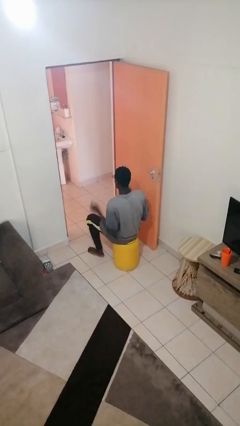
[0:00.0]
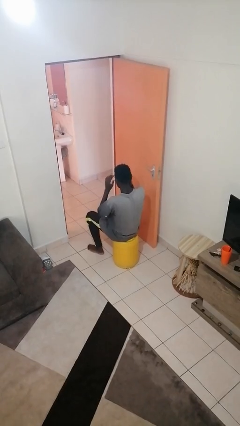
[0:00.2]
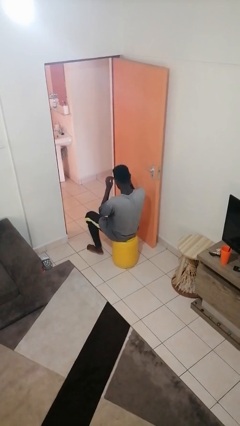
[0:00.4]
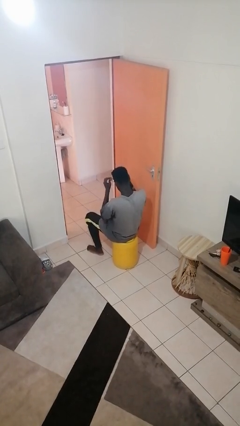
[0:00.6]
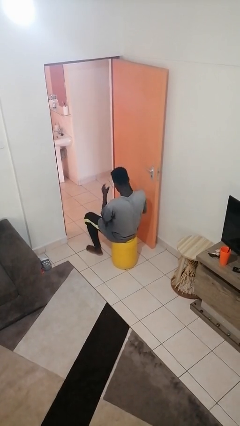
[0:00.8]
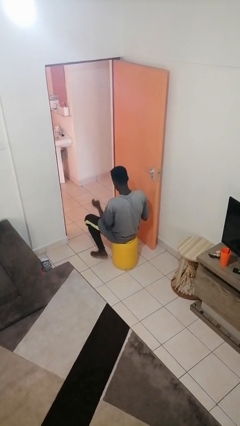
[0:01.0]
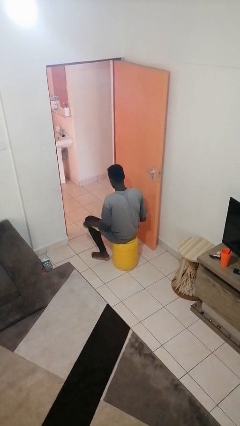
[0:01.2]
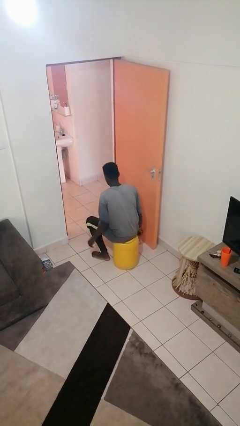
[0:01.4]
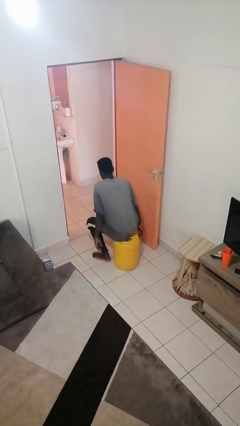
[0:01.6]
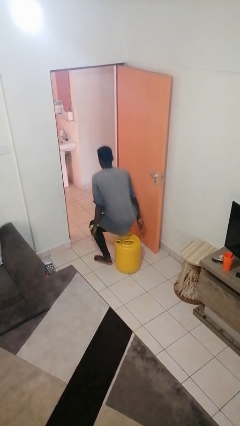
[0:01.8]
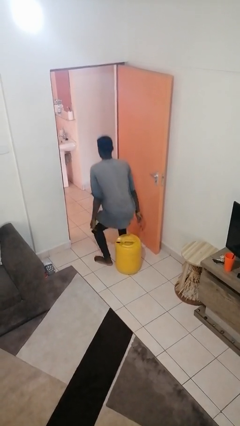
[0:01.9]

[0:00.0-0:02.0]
person takes off glasses

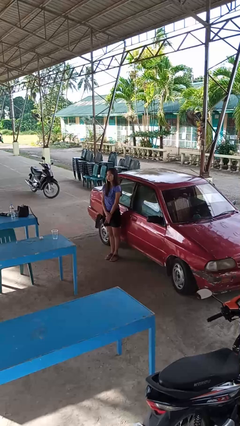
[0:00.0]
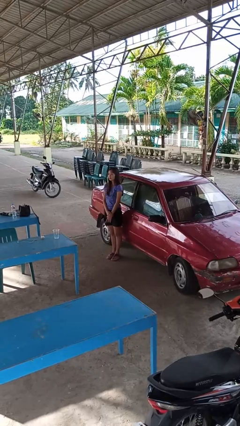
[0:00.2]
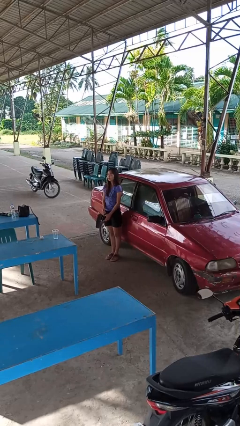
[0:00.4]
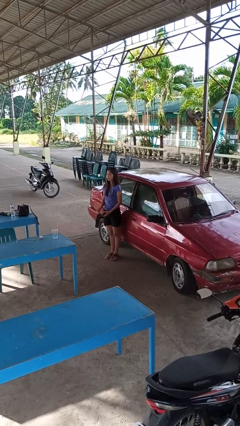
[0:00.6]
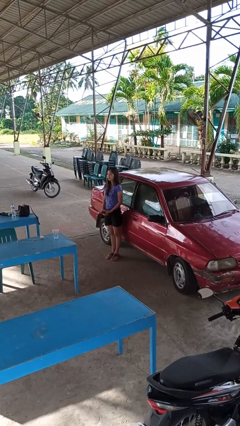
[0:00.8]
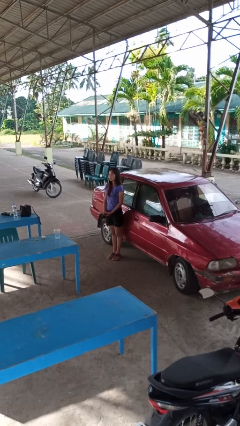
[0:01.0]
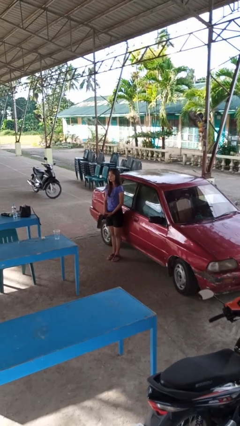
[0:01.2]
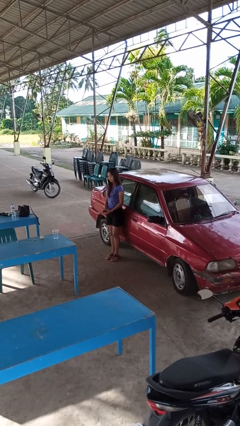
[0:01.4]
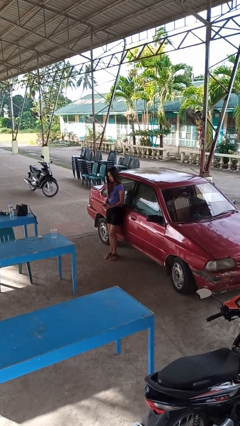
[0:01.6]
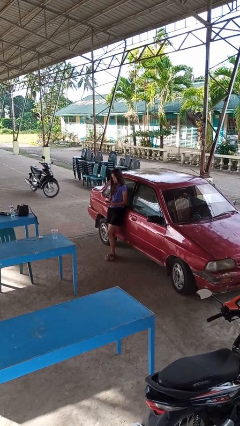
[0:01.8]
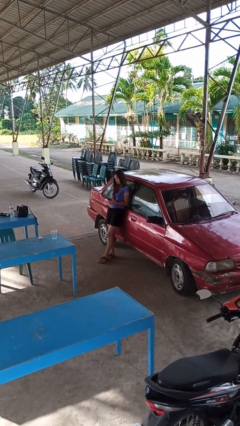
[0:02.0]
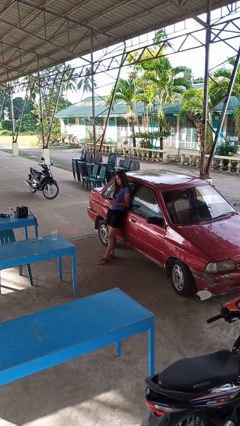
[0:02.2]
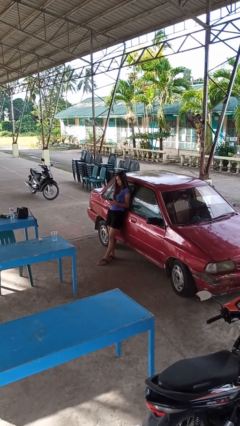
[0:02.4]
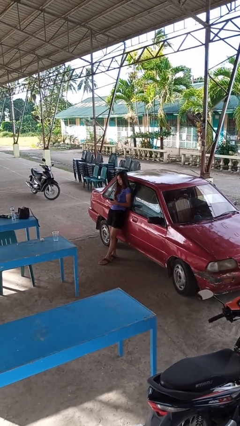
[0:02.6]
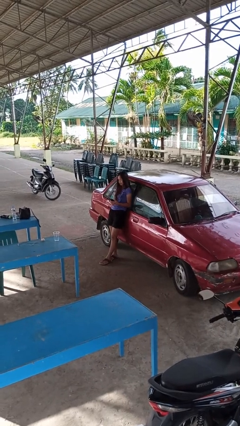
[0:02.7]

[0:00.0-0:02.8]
person leans against car

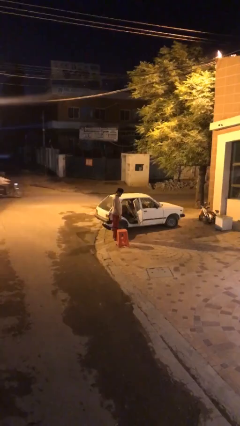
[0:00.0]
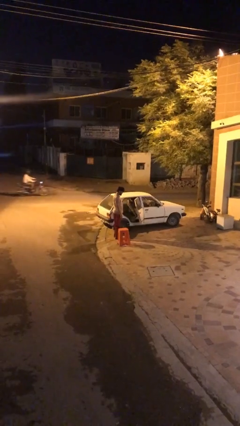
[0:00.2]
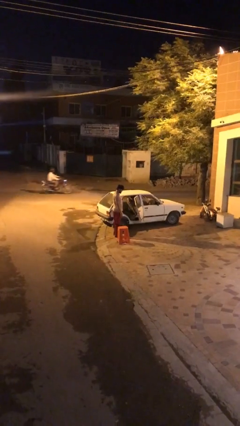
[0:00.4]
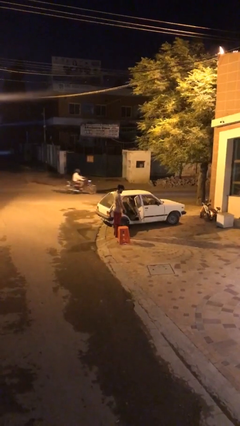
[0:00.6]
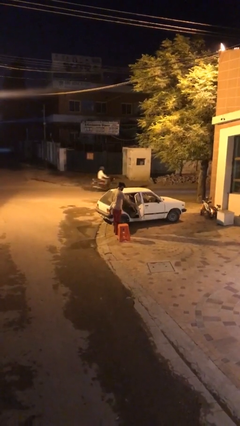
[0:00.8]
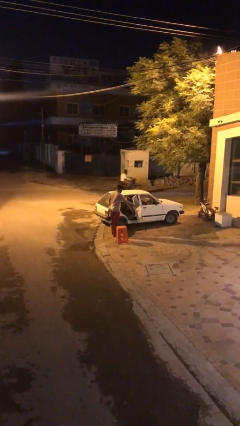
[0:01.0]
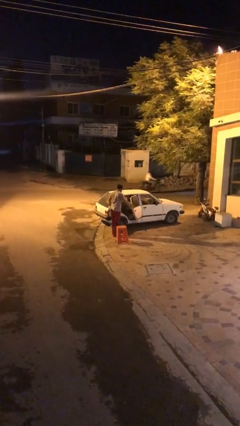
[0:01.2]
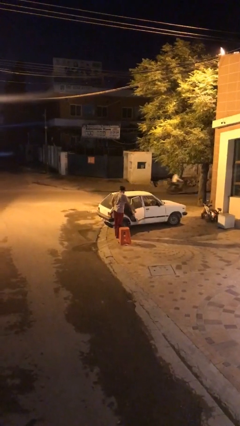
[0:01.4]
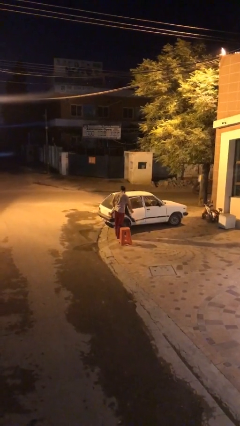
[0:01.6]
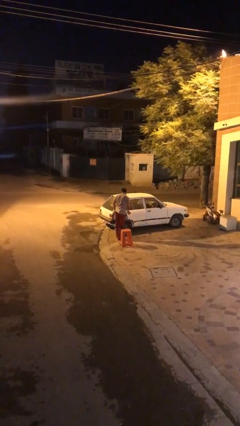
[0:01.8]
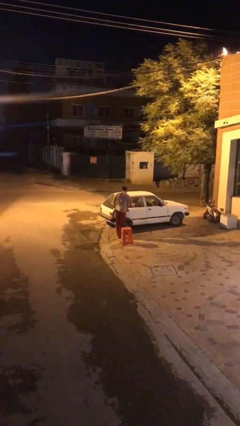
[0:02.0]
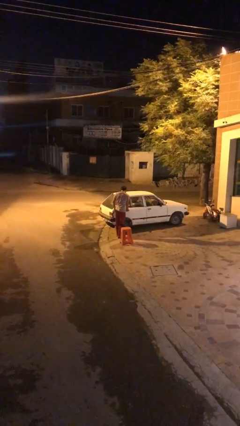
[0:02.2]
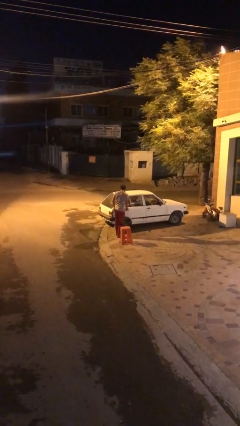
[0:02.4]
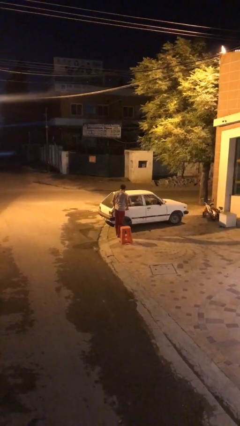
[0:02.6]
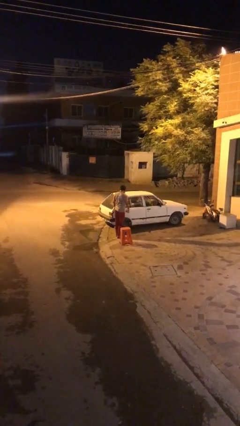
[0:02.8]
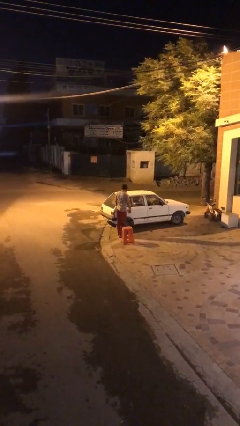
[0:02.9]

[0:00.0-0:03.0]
person closes car door

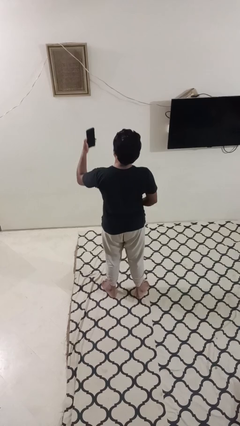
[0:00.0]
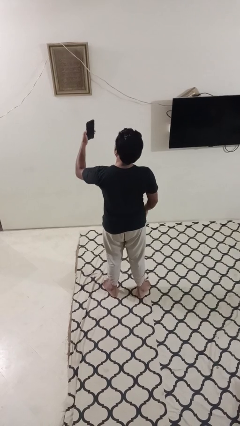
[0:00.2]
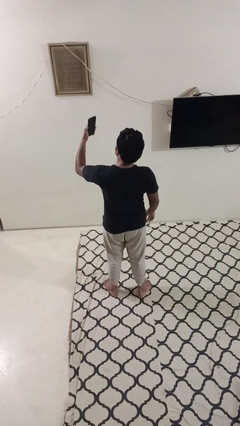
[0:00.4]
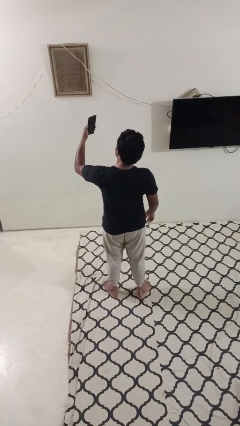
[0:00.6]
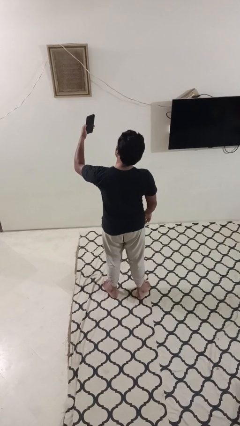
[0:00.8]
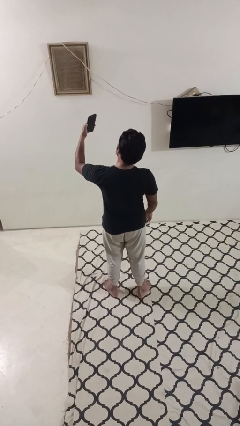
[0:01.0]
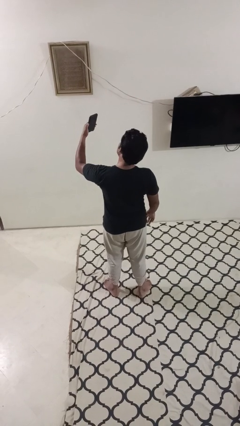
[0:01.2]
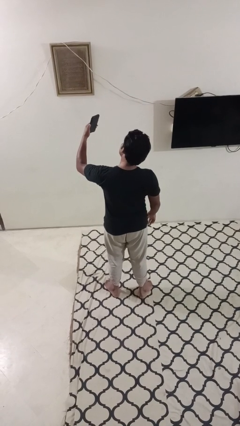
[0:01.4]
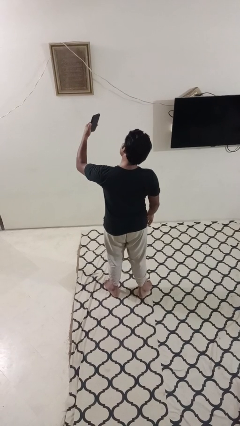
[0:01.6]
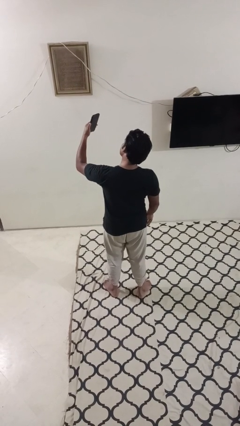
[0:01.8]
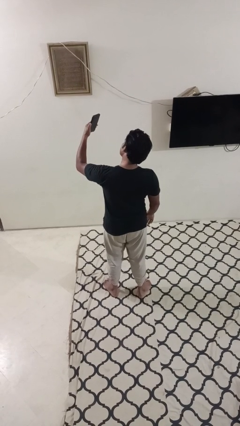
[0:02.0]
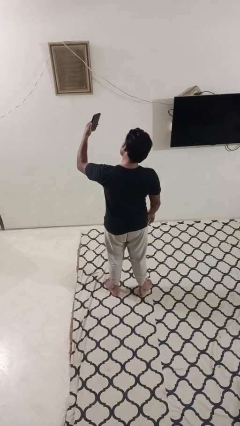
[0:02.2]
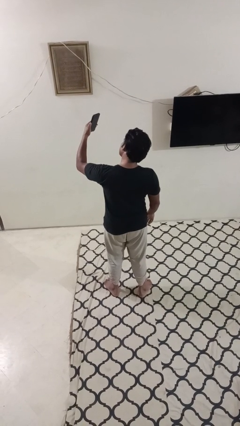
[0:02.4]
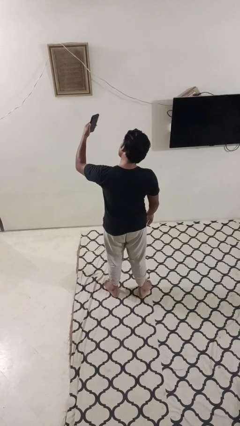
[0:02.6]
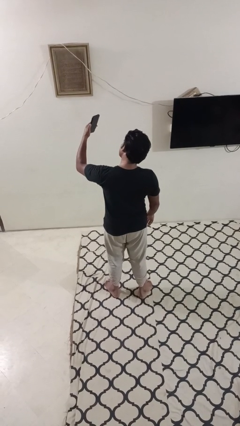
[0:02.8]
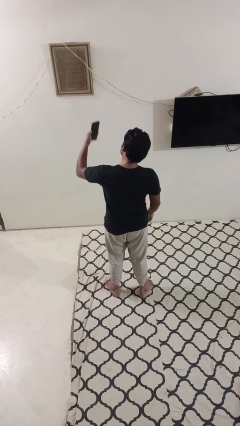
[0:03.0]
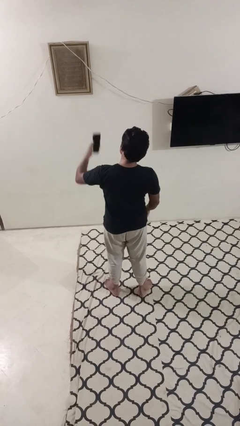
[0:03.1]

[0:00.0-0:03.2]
person takes selfie

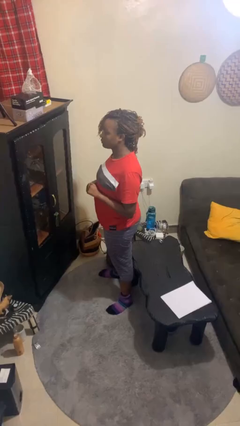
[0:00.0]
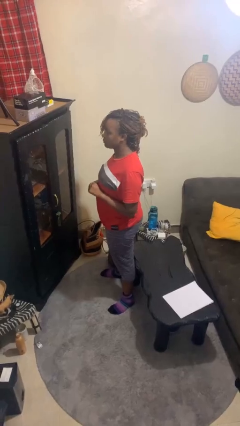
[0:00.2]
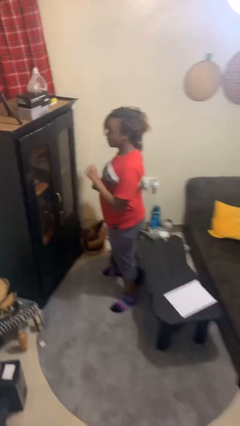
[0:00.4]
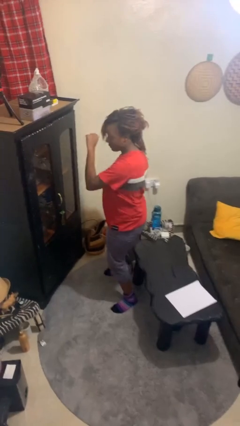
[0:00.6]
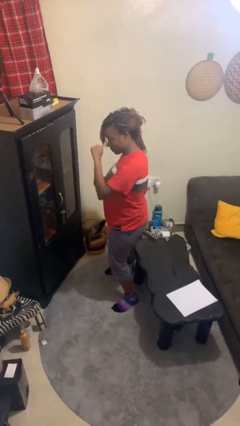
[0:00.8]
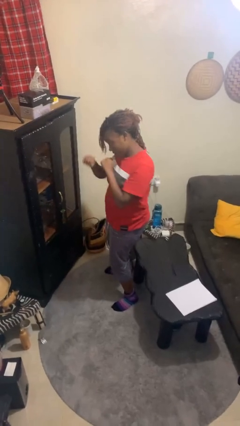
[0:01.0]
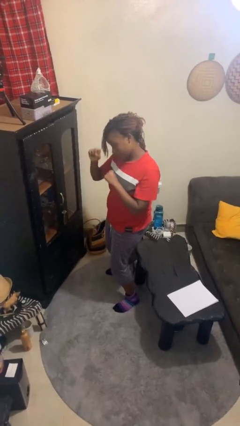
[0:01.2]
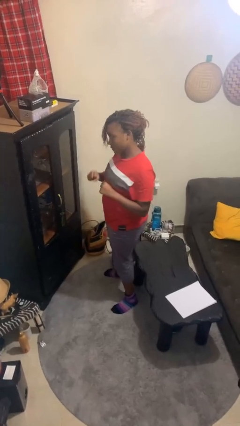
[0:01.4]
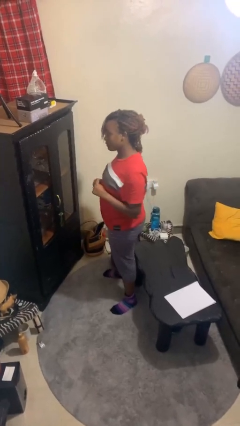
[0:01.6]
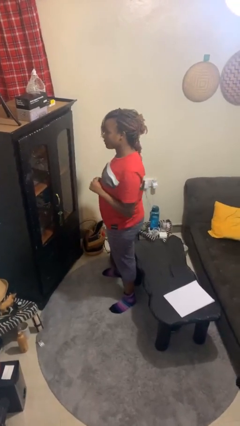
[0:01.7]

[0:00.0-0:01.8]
person punches

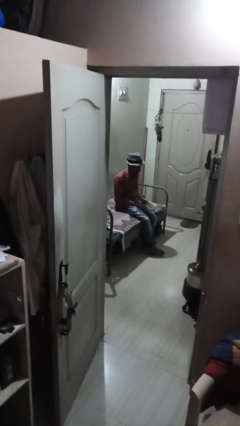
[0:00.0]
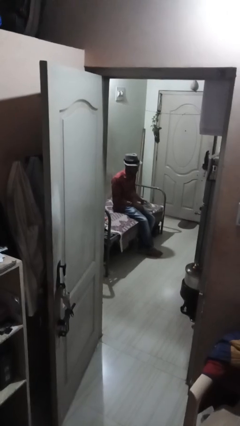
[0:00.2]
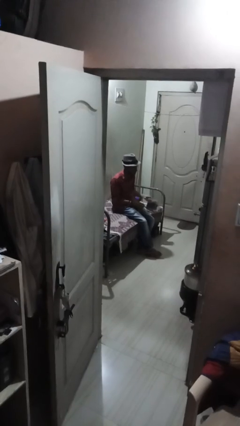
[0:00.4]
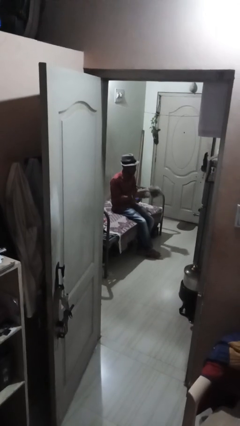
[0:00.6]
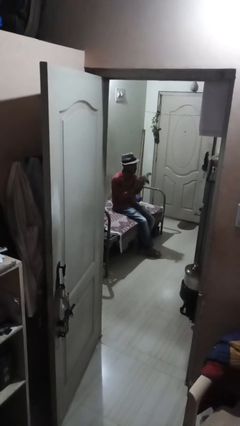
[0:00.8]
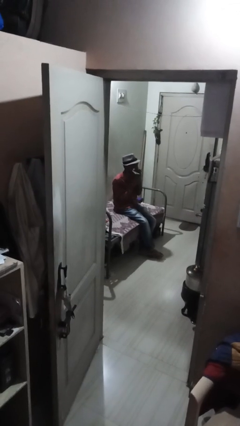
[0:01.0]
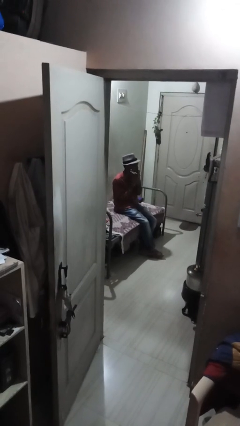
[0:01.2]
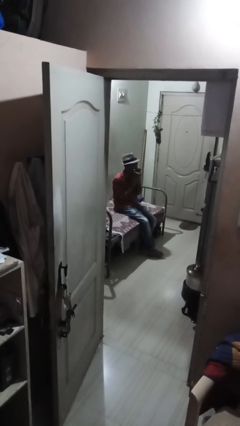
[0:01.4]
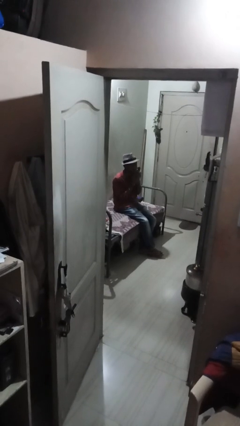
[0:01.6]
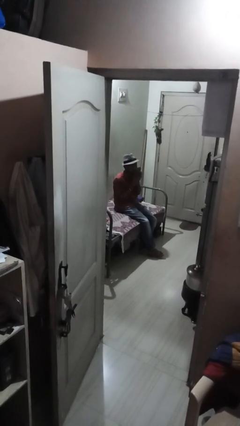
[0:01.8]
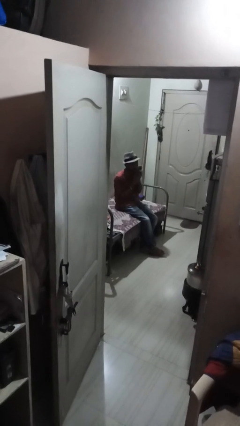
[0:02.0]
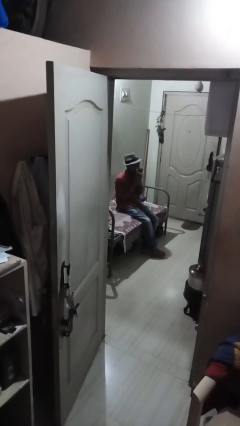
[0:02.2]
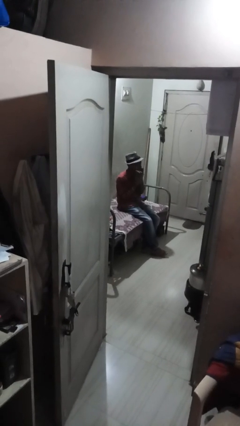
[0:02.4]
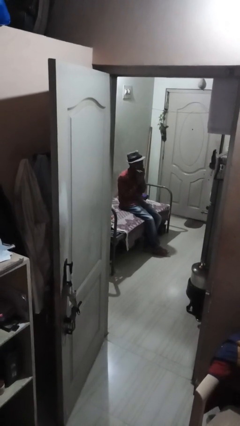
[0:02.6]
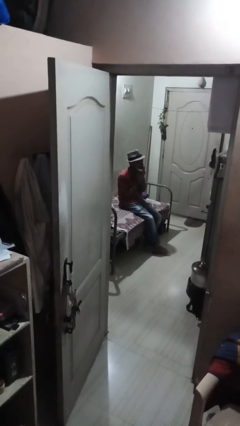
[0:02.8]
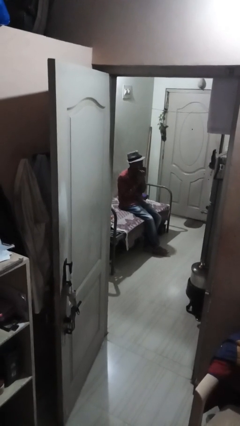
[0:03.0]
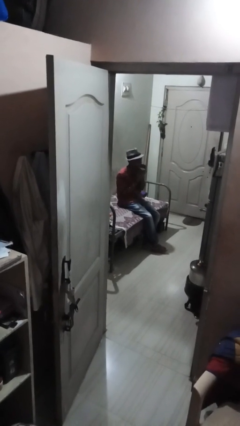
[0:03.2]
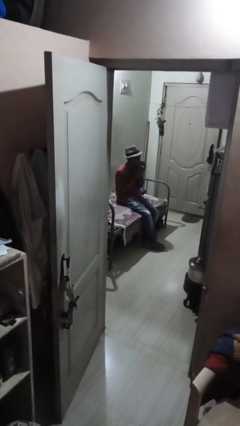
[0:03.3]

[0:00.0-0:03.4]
person wipes mouth with napkin

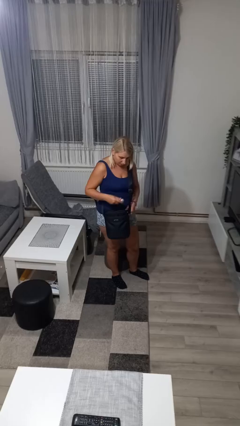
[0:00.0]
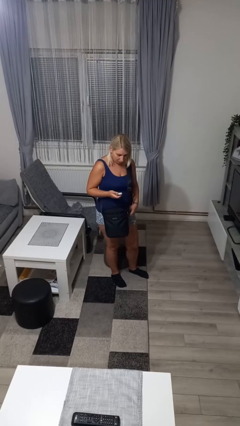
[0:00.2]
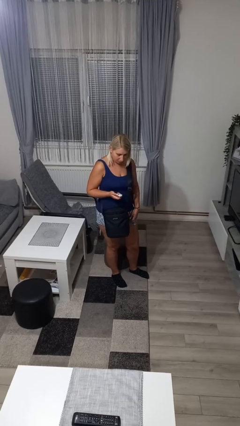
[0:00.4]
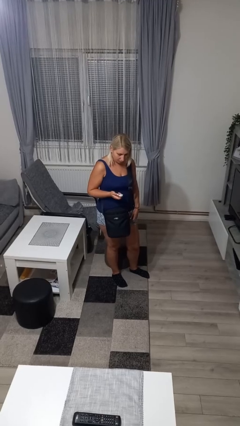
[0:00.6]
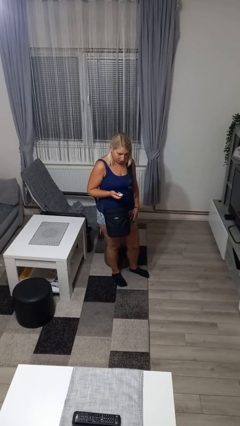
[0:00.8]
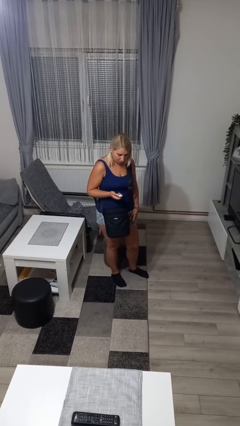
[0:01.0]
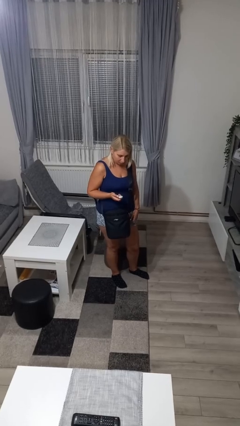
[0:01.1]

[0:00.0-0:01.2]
person takes object from purse
